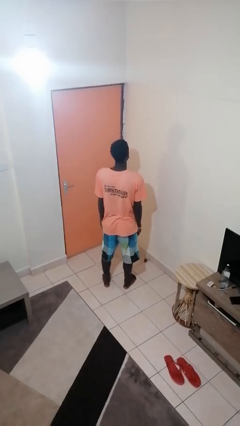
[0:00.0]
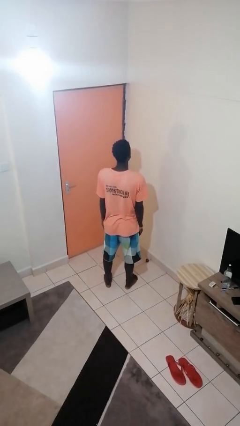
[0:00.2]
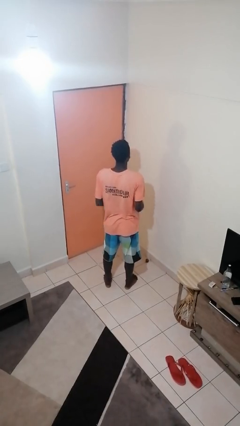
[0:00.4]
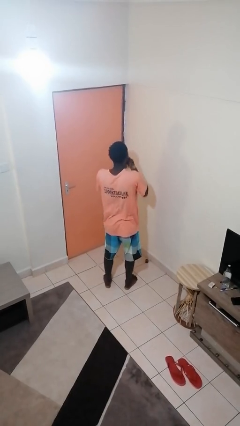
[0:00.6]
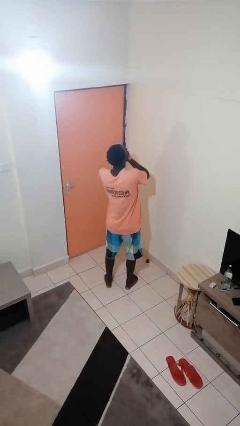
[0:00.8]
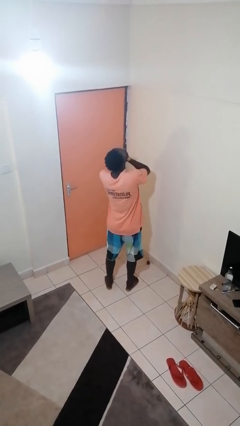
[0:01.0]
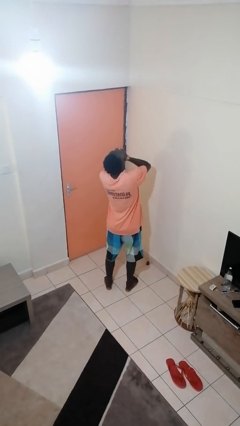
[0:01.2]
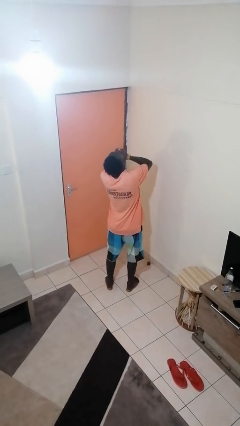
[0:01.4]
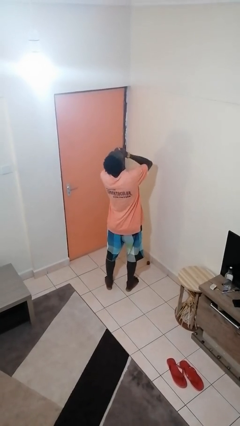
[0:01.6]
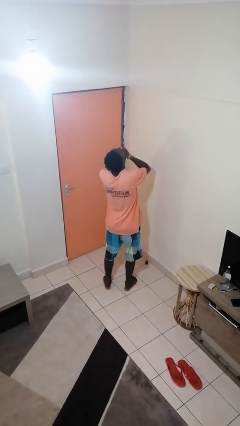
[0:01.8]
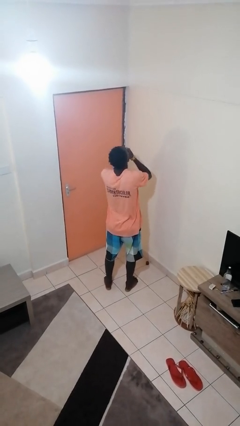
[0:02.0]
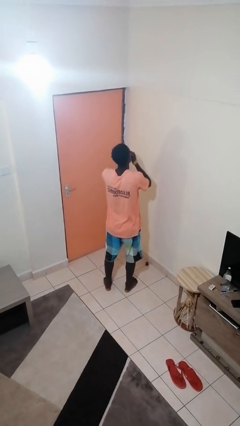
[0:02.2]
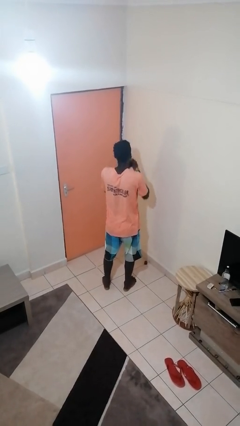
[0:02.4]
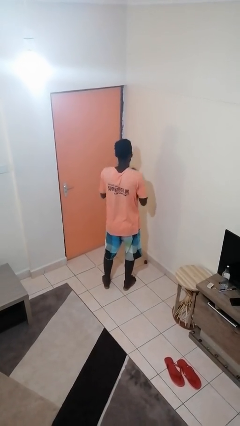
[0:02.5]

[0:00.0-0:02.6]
person yawns

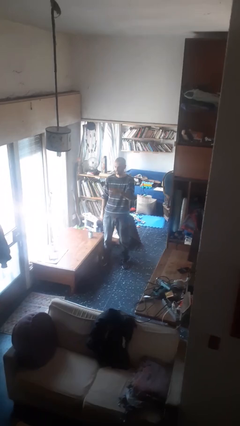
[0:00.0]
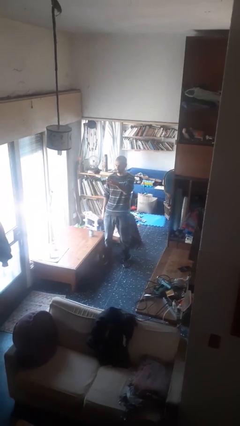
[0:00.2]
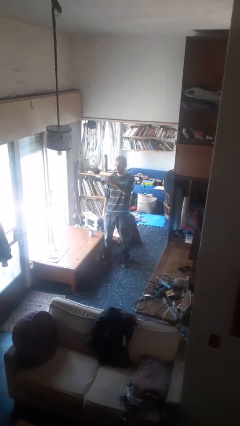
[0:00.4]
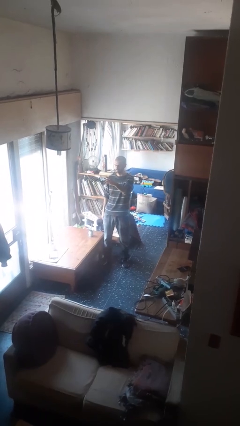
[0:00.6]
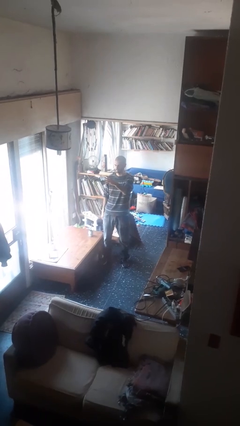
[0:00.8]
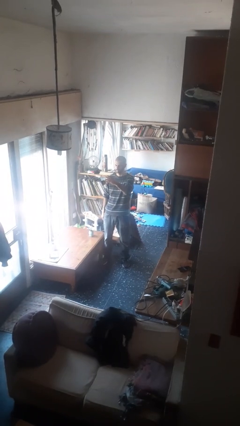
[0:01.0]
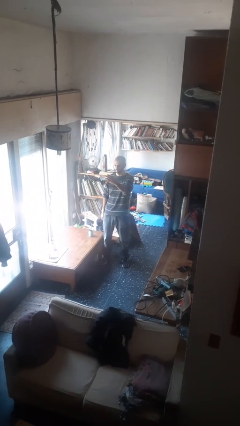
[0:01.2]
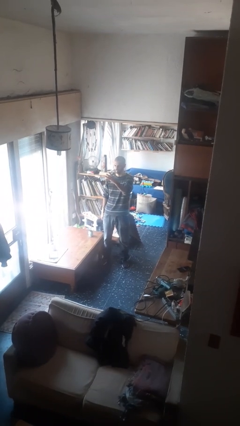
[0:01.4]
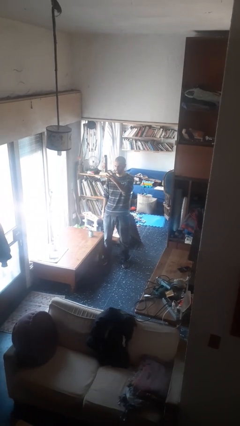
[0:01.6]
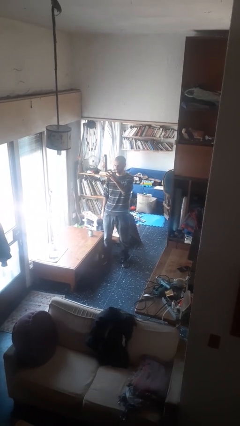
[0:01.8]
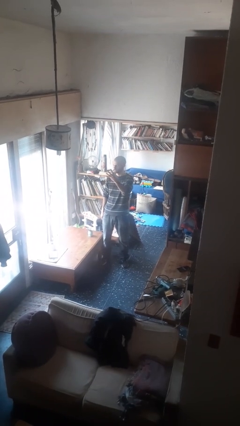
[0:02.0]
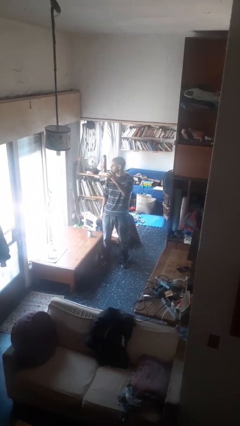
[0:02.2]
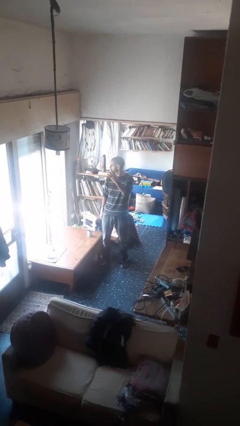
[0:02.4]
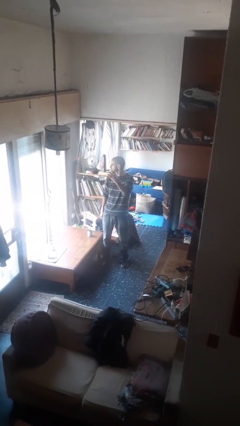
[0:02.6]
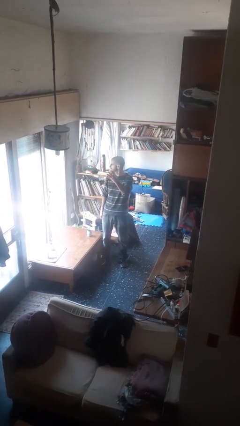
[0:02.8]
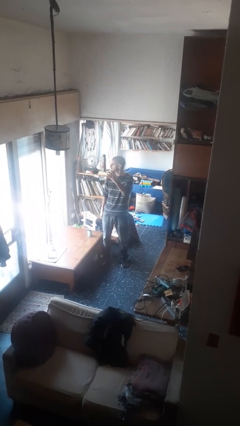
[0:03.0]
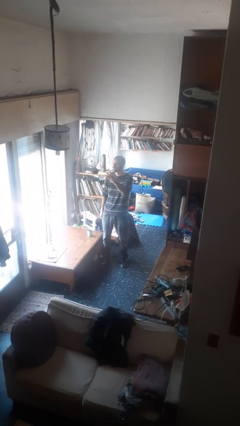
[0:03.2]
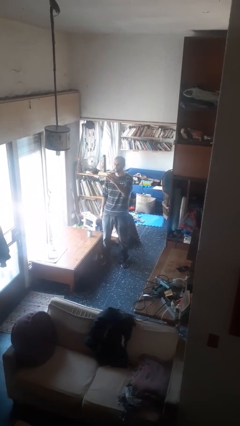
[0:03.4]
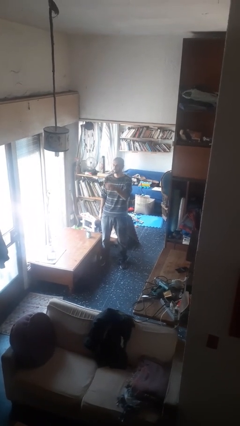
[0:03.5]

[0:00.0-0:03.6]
person gestures number four

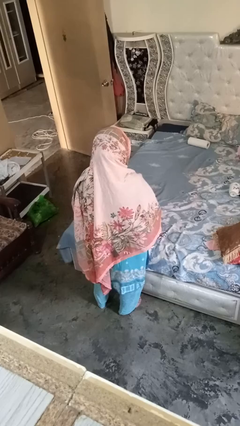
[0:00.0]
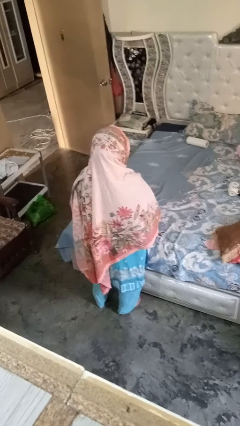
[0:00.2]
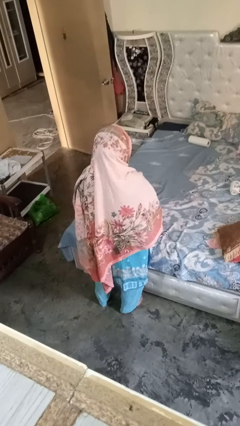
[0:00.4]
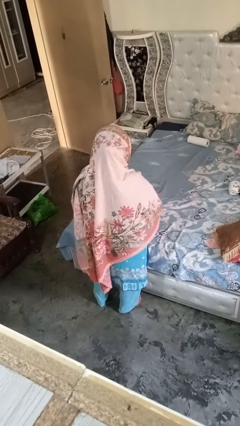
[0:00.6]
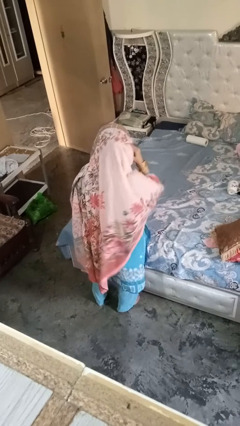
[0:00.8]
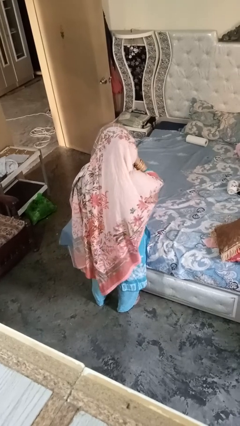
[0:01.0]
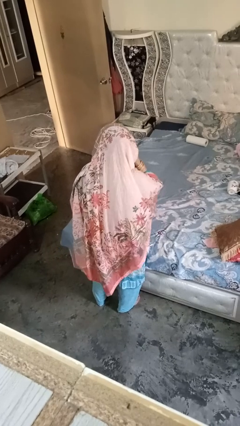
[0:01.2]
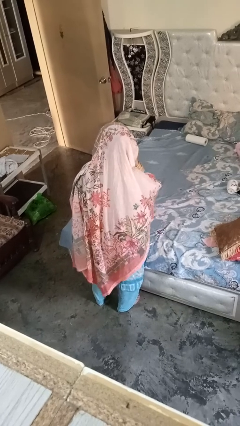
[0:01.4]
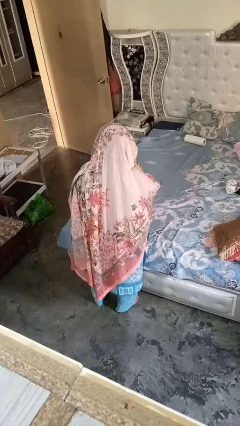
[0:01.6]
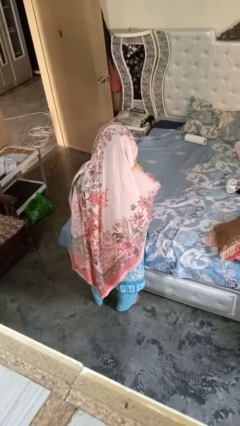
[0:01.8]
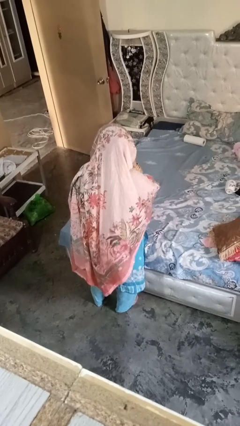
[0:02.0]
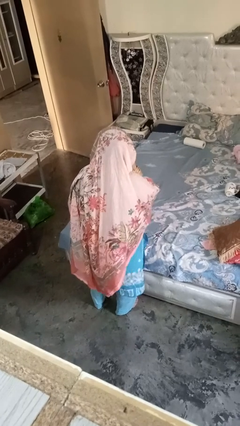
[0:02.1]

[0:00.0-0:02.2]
person gestures listen closely

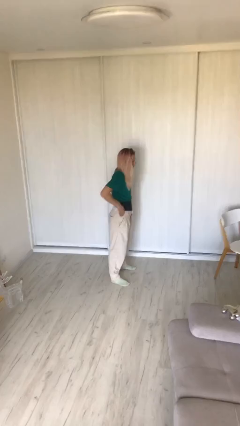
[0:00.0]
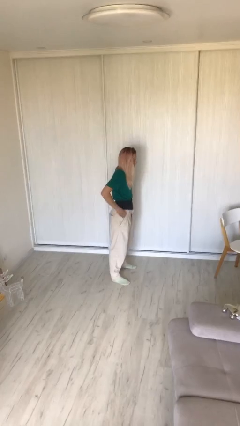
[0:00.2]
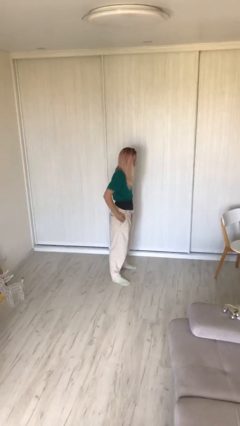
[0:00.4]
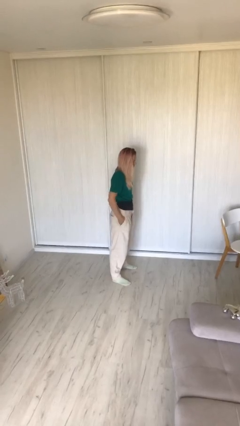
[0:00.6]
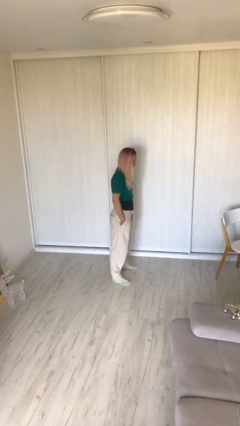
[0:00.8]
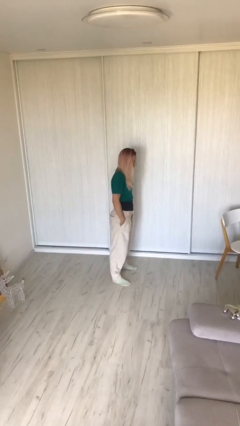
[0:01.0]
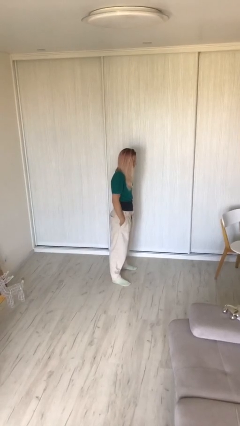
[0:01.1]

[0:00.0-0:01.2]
person puts hands in back pockets

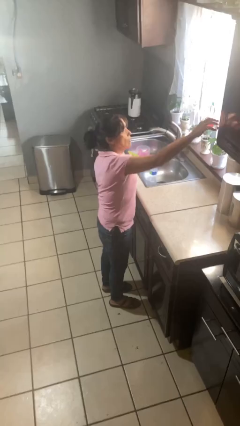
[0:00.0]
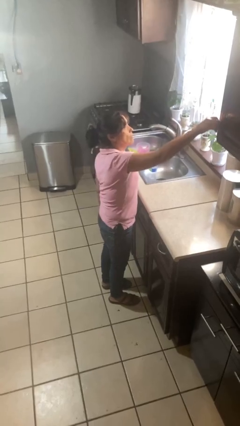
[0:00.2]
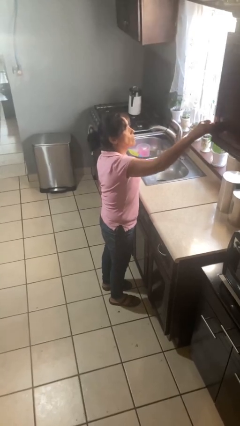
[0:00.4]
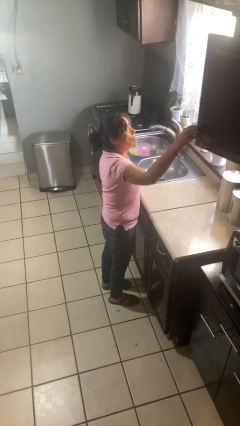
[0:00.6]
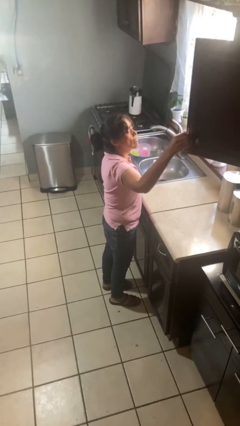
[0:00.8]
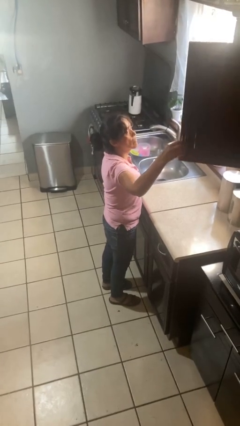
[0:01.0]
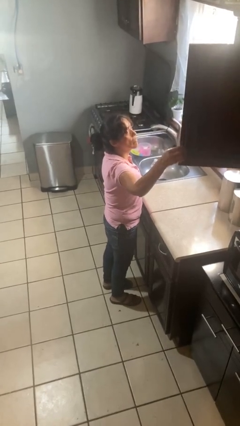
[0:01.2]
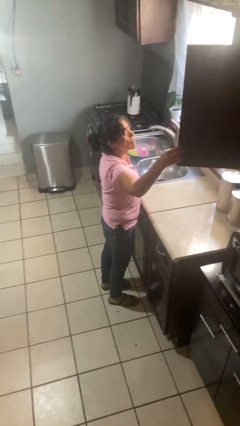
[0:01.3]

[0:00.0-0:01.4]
person opens cabinet

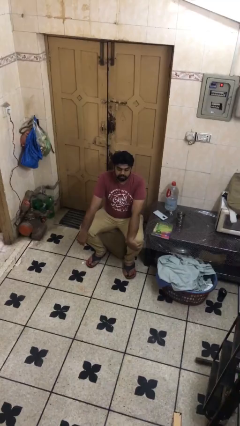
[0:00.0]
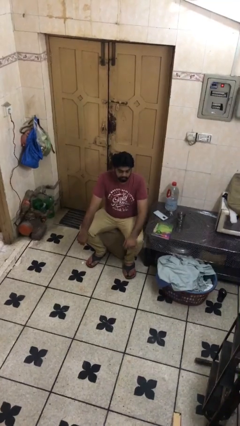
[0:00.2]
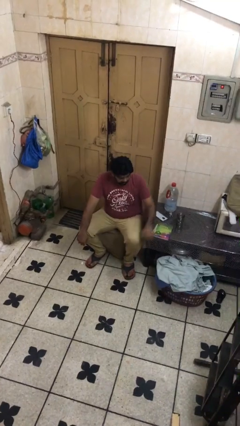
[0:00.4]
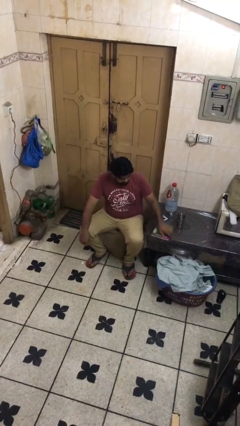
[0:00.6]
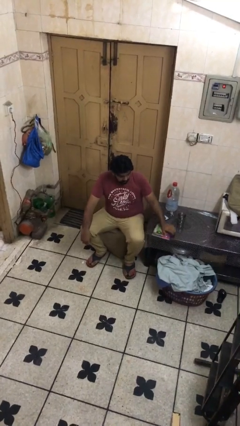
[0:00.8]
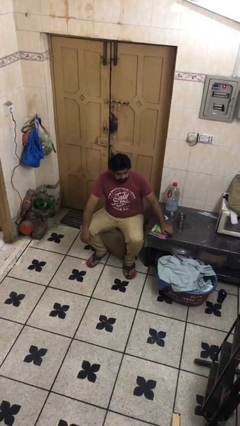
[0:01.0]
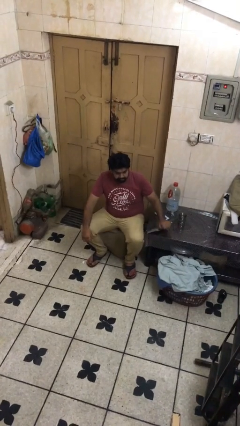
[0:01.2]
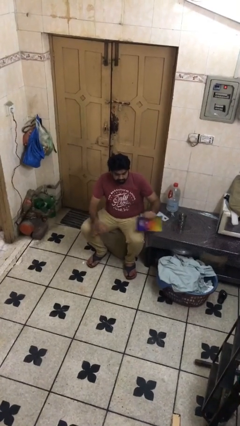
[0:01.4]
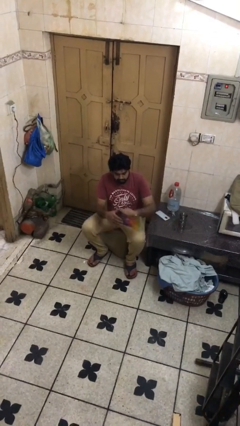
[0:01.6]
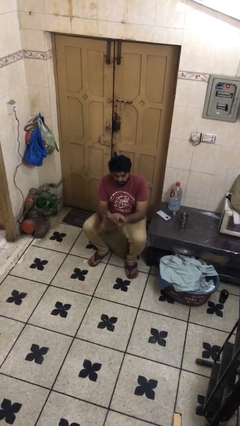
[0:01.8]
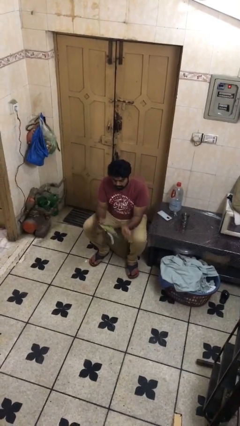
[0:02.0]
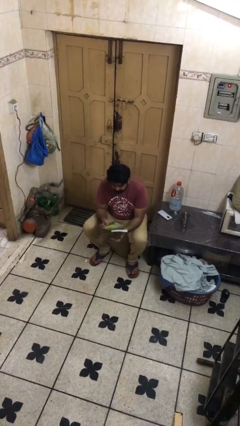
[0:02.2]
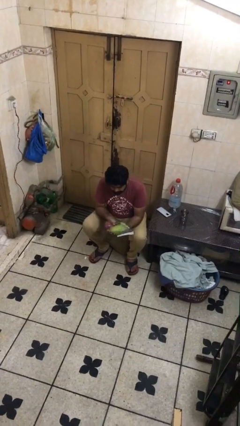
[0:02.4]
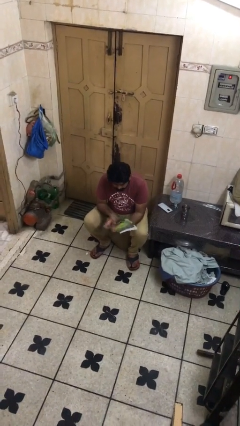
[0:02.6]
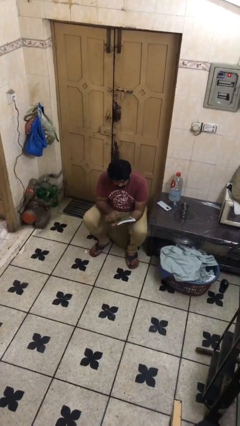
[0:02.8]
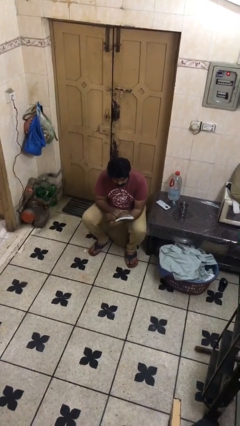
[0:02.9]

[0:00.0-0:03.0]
person picks up object from table

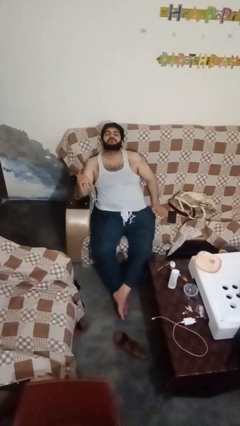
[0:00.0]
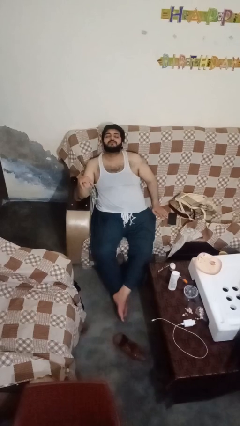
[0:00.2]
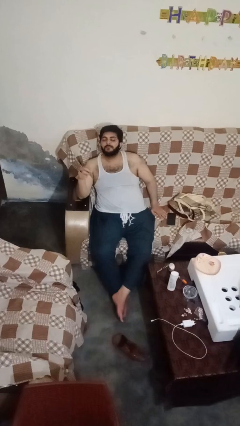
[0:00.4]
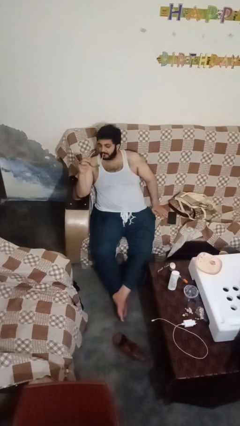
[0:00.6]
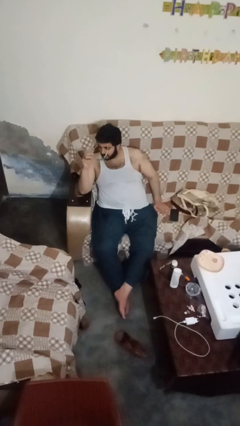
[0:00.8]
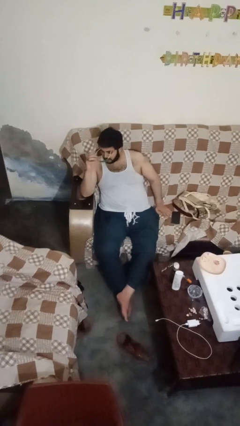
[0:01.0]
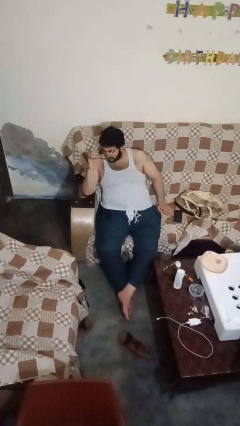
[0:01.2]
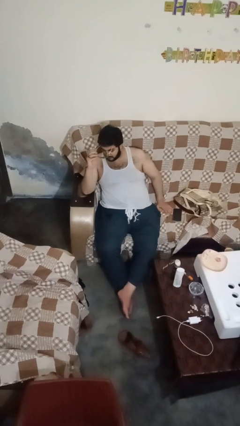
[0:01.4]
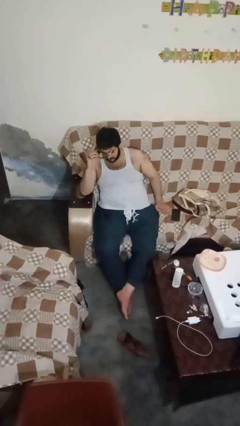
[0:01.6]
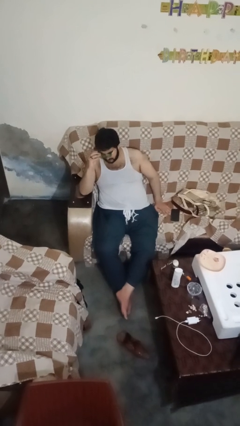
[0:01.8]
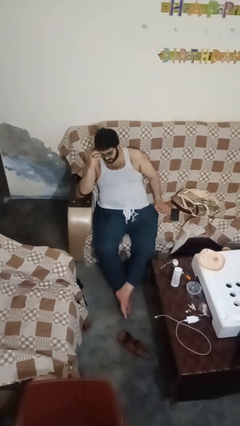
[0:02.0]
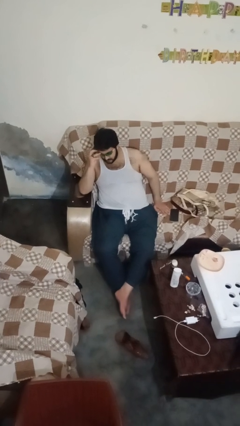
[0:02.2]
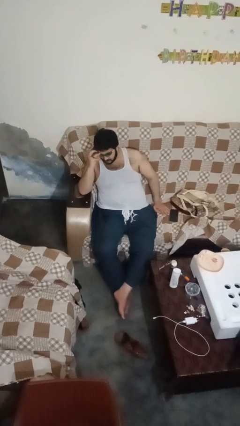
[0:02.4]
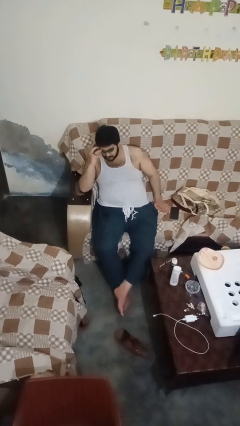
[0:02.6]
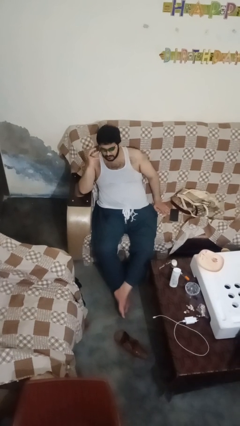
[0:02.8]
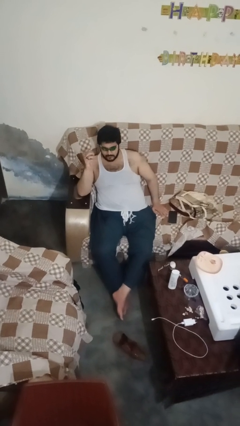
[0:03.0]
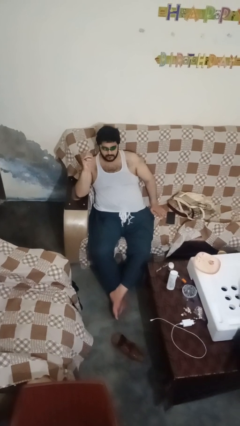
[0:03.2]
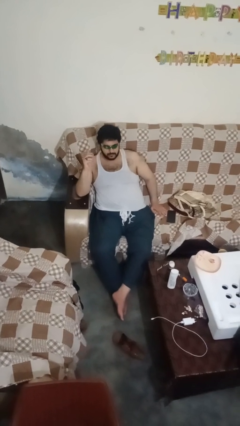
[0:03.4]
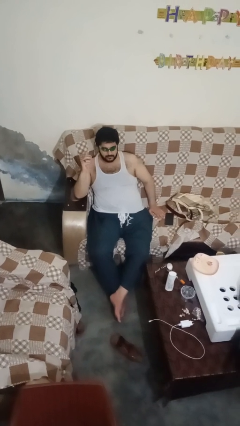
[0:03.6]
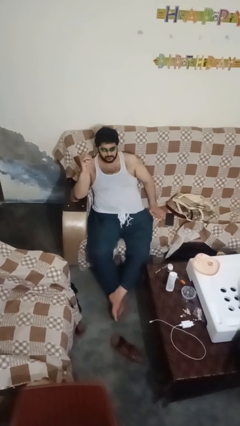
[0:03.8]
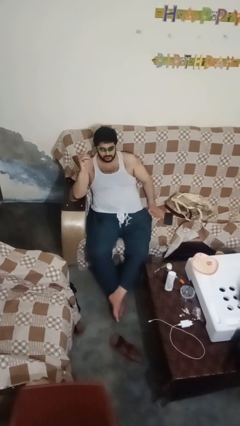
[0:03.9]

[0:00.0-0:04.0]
person puts on sunglasses
